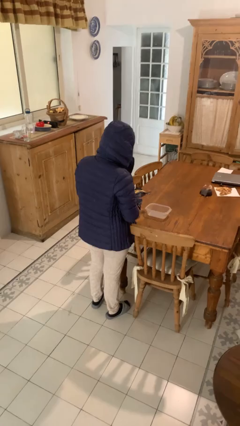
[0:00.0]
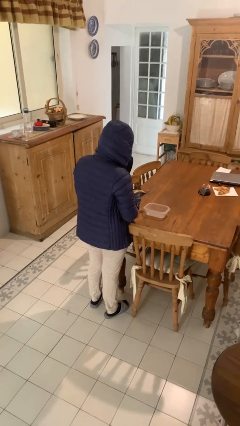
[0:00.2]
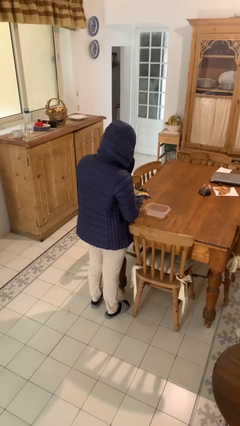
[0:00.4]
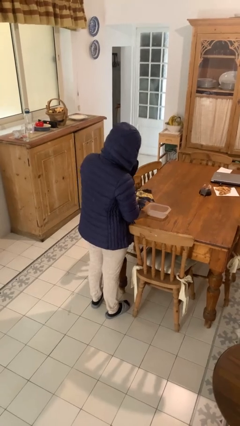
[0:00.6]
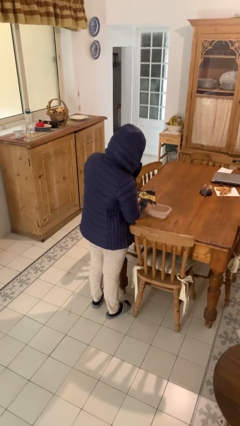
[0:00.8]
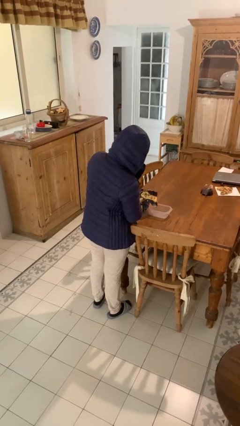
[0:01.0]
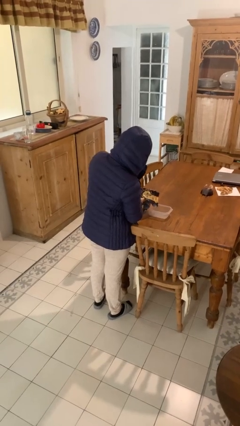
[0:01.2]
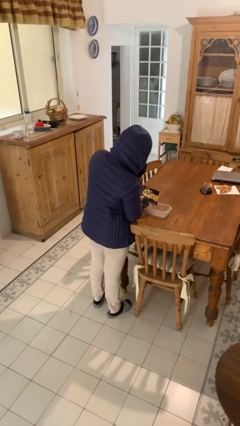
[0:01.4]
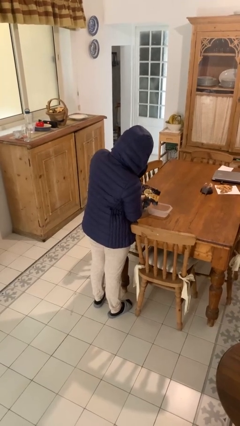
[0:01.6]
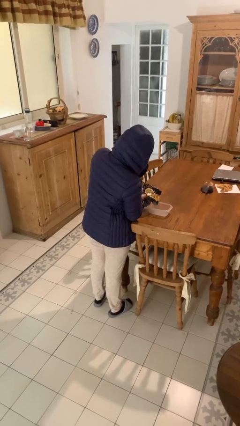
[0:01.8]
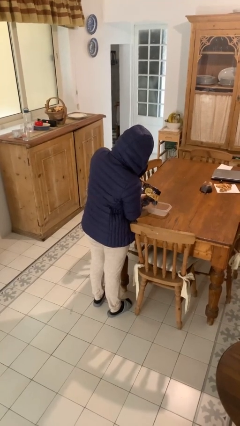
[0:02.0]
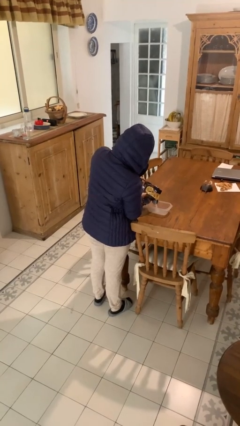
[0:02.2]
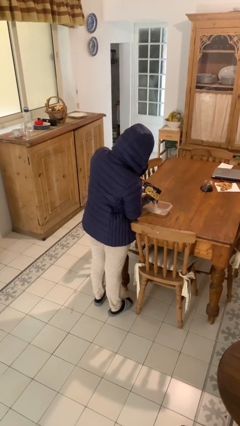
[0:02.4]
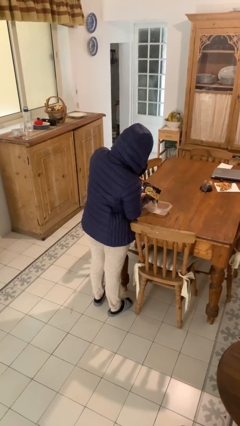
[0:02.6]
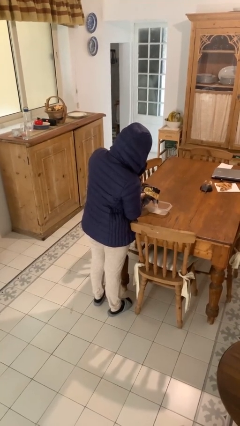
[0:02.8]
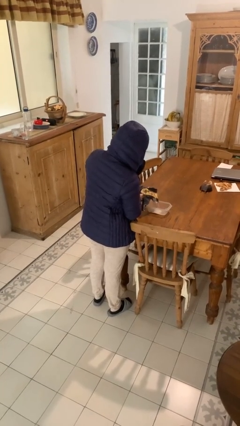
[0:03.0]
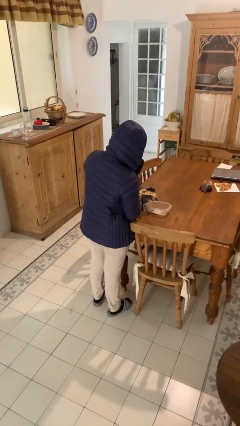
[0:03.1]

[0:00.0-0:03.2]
person pours into bowl

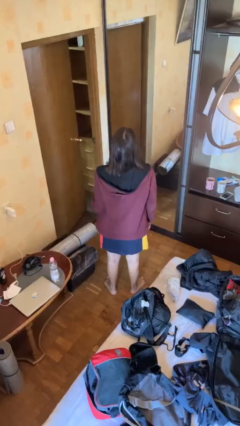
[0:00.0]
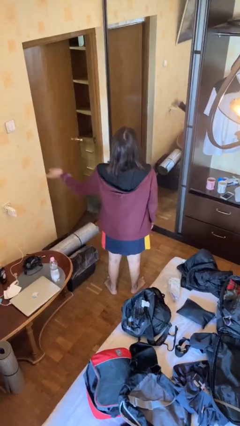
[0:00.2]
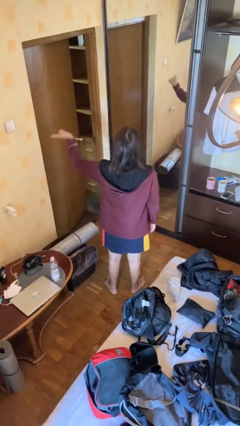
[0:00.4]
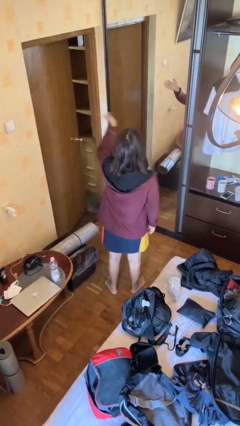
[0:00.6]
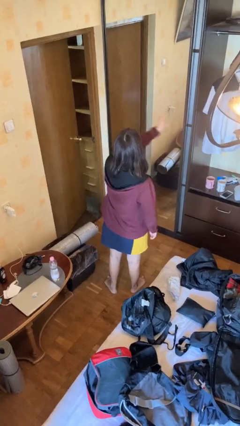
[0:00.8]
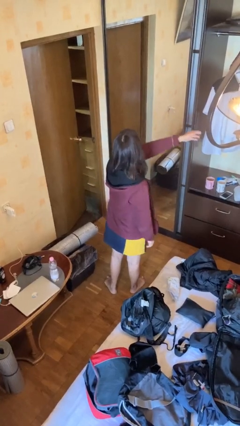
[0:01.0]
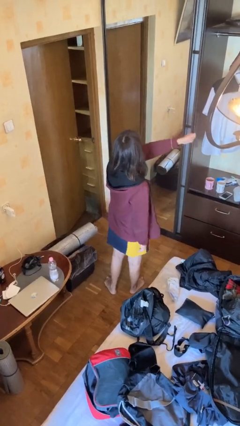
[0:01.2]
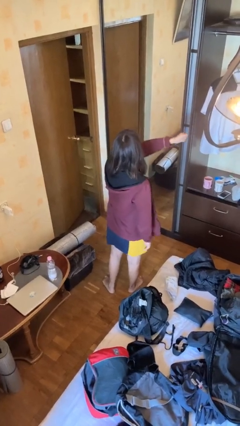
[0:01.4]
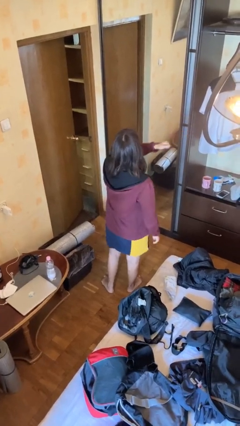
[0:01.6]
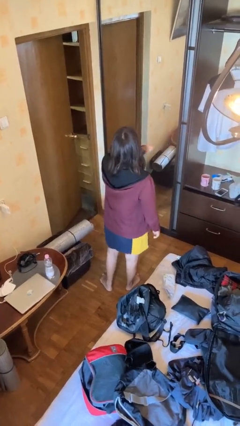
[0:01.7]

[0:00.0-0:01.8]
person gestures swipe right

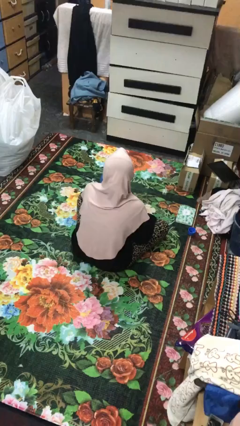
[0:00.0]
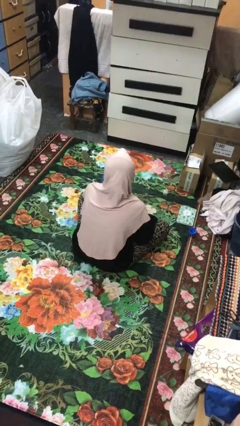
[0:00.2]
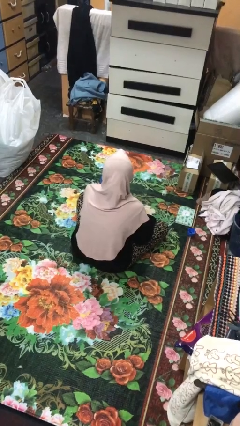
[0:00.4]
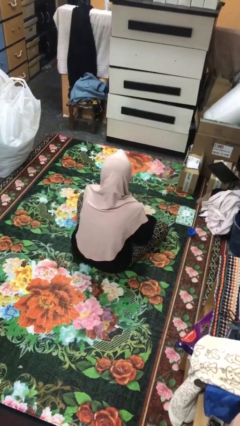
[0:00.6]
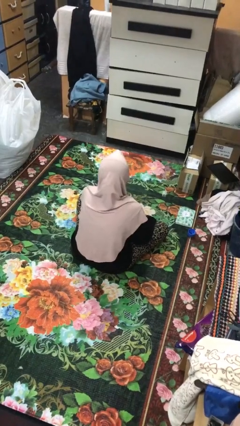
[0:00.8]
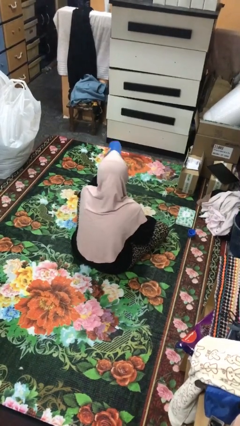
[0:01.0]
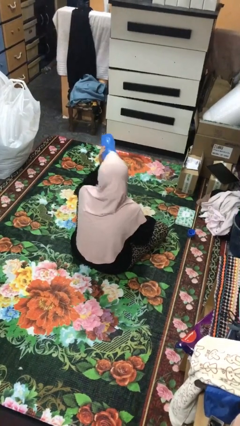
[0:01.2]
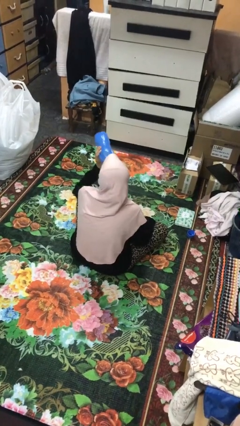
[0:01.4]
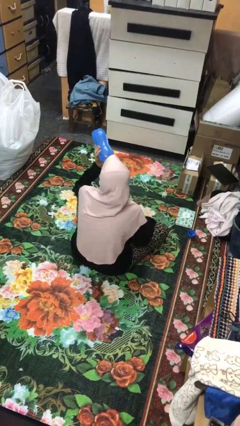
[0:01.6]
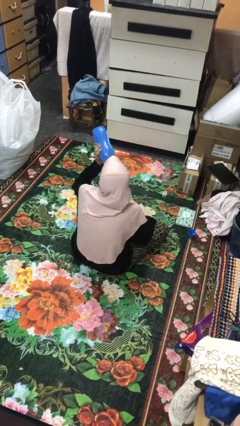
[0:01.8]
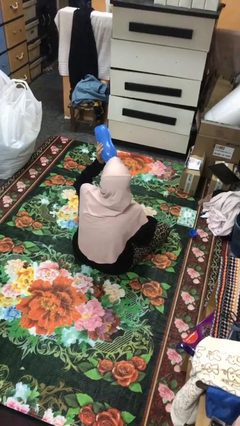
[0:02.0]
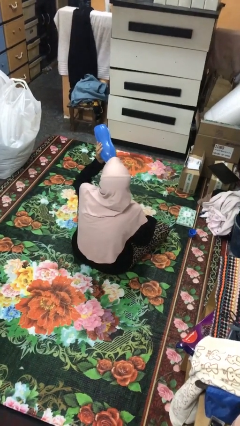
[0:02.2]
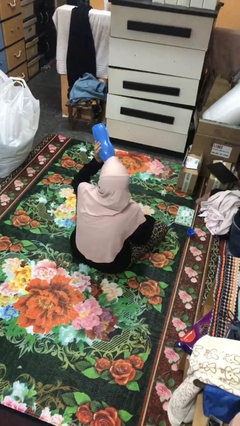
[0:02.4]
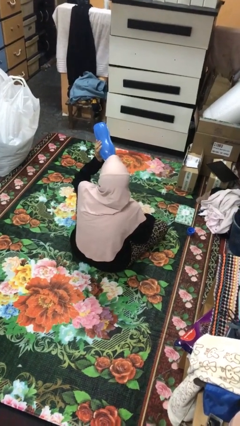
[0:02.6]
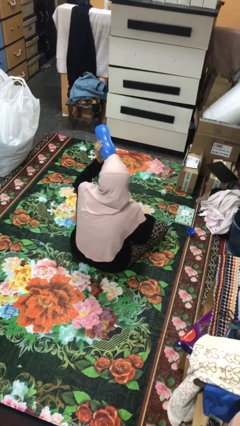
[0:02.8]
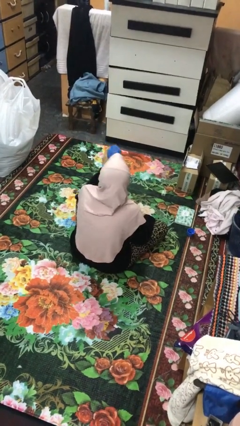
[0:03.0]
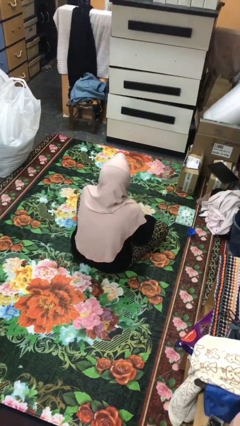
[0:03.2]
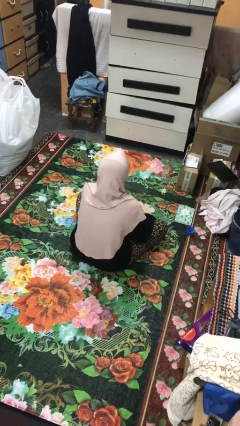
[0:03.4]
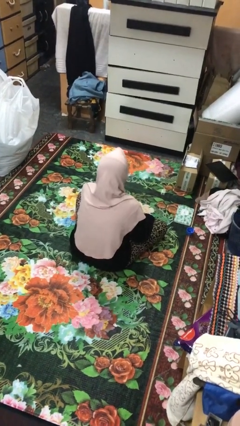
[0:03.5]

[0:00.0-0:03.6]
person drinks from bottle

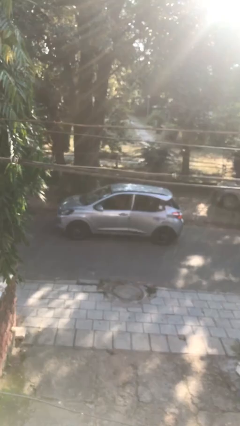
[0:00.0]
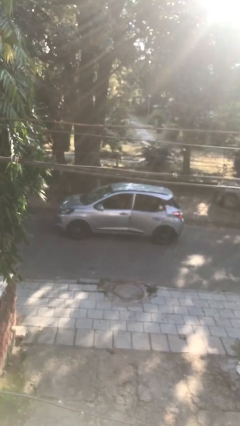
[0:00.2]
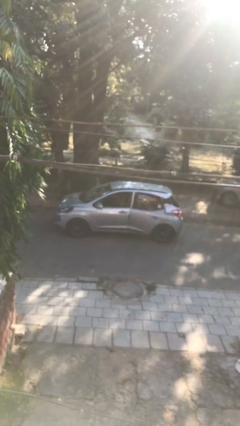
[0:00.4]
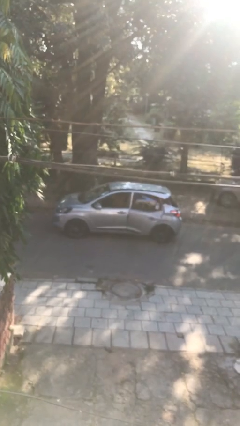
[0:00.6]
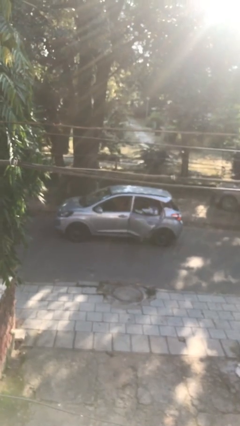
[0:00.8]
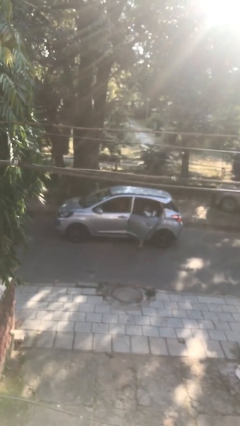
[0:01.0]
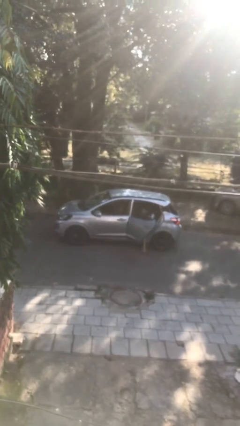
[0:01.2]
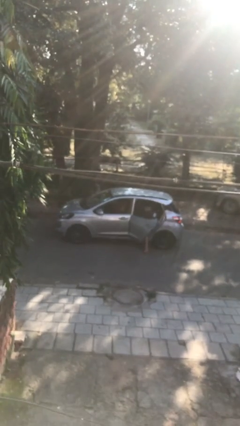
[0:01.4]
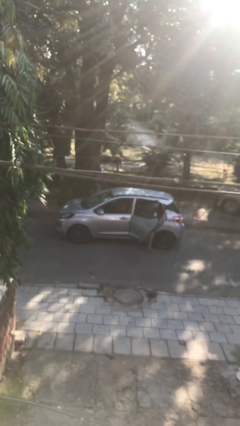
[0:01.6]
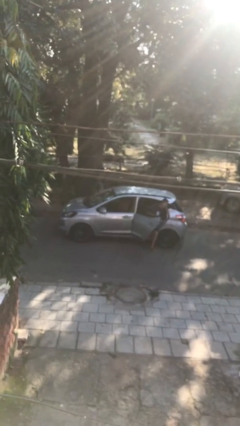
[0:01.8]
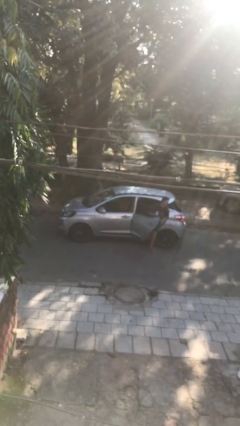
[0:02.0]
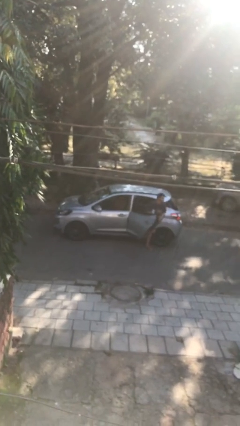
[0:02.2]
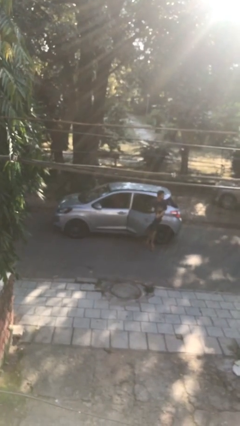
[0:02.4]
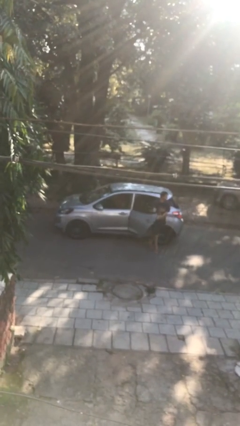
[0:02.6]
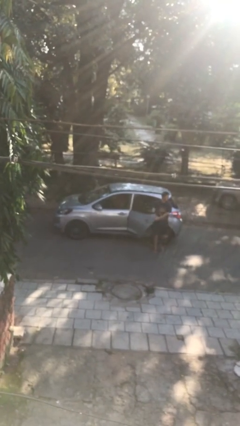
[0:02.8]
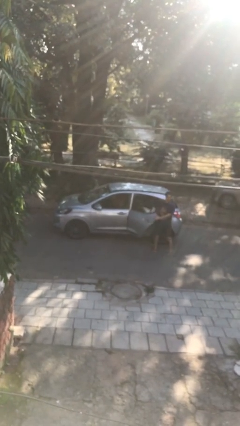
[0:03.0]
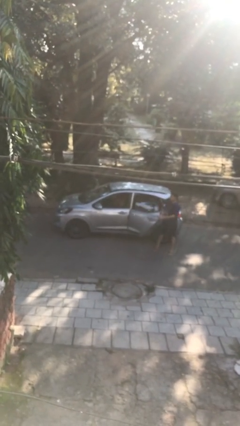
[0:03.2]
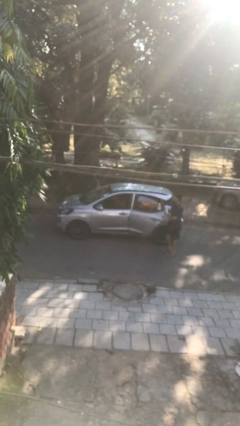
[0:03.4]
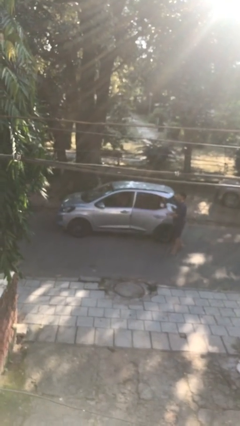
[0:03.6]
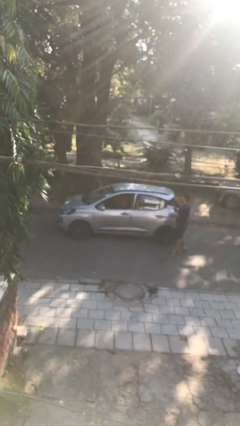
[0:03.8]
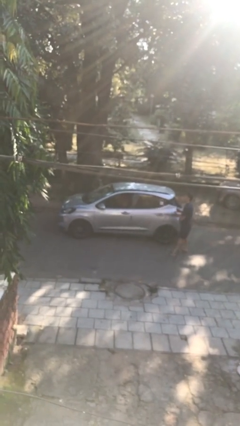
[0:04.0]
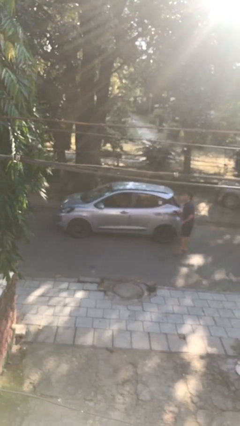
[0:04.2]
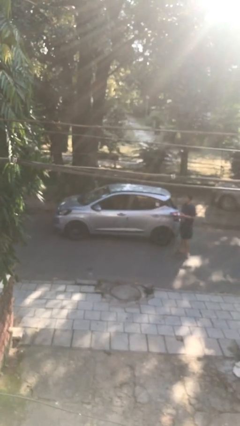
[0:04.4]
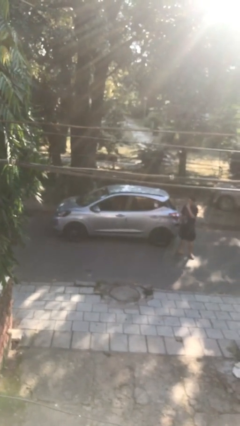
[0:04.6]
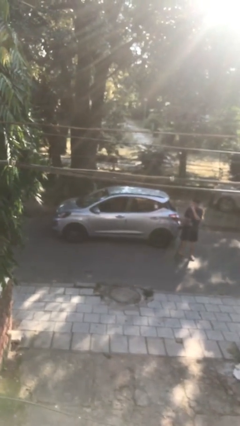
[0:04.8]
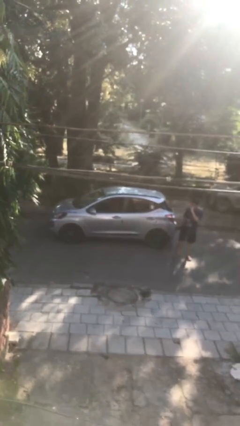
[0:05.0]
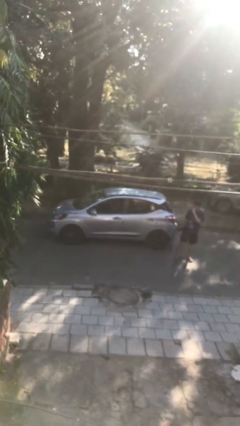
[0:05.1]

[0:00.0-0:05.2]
car drops off person

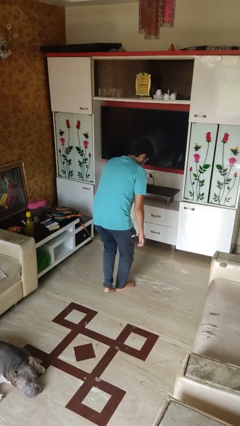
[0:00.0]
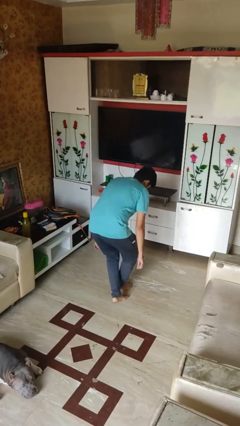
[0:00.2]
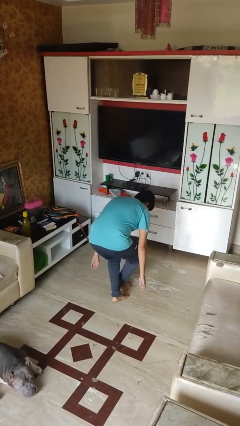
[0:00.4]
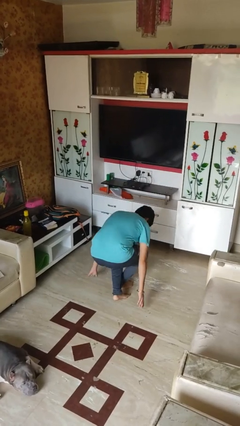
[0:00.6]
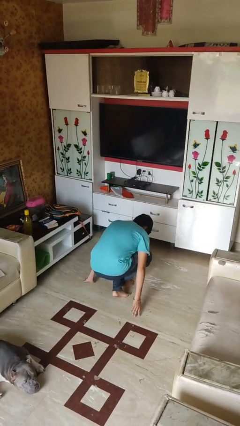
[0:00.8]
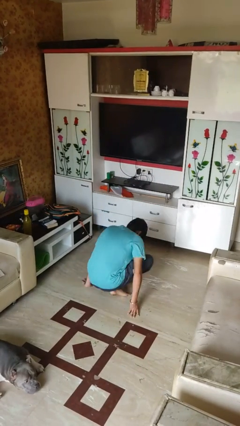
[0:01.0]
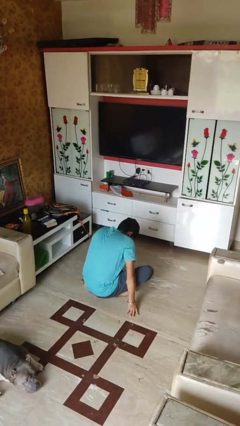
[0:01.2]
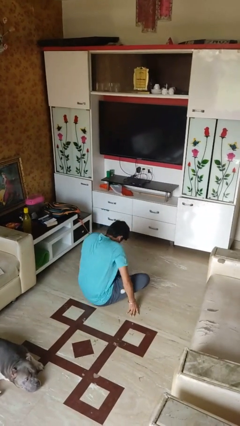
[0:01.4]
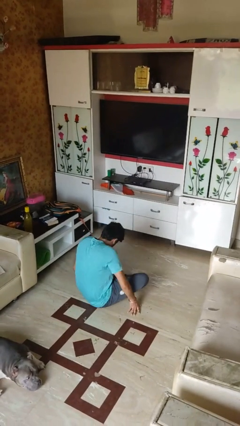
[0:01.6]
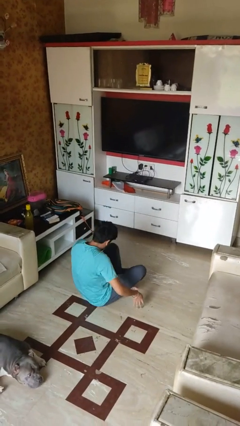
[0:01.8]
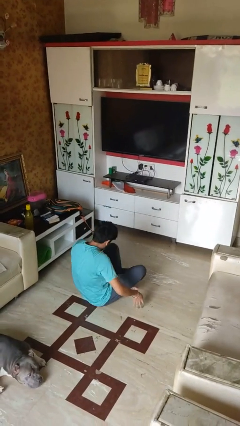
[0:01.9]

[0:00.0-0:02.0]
person sits crisscross

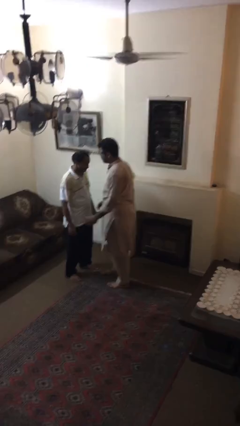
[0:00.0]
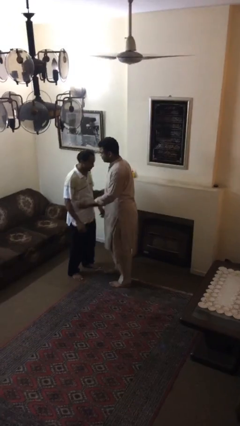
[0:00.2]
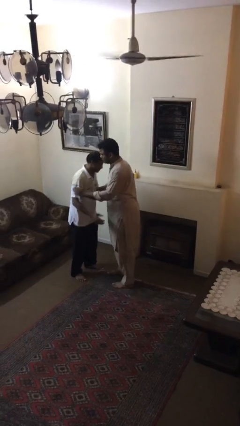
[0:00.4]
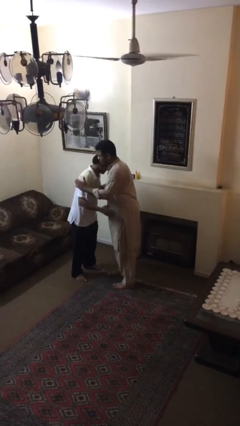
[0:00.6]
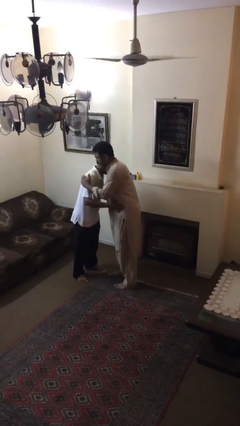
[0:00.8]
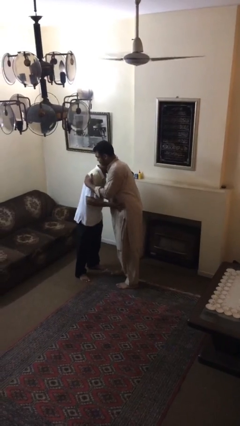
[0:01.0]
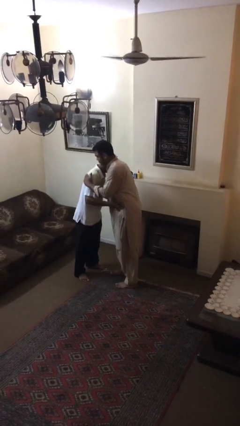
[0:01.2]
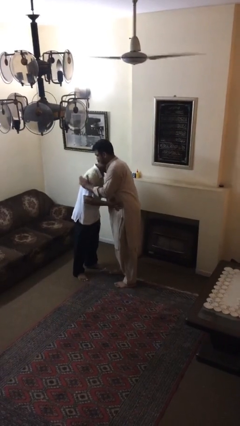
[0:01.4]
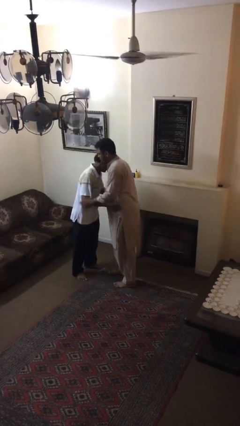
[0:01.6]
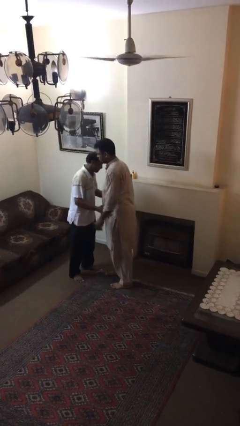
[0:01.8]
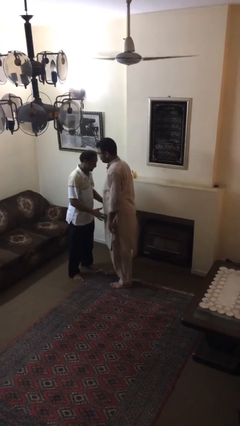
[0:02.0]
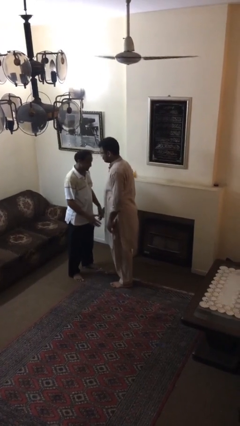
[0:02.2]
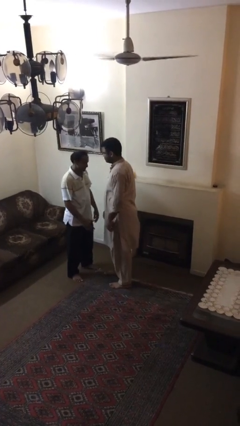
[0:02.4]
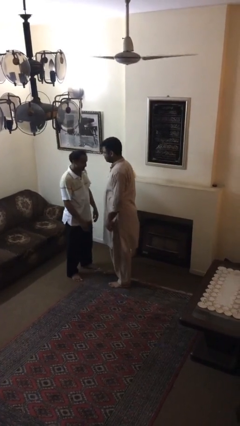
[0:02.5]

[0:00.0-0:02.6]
person embraces person
